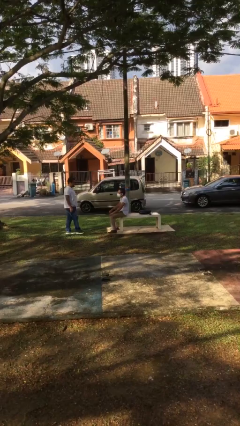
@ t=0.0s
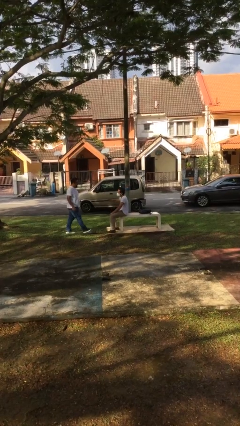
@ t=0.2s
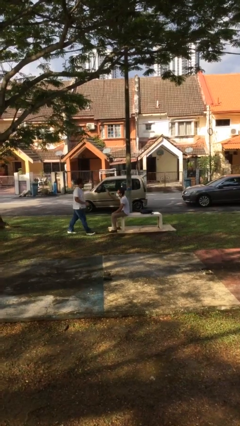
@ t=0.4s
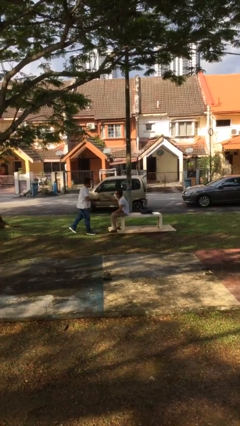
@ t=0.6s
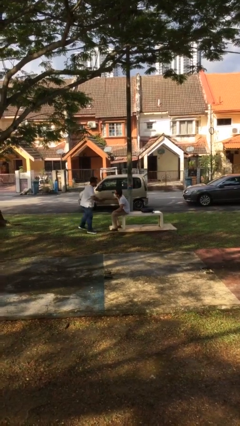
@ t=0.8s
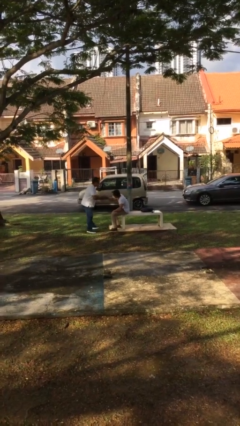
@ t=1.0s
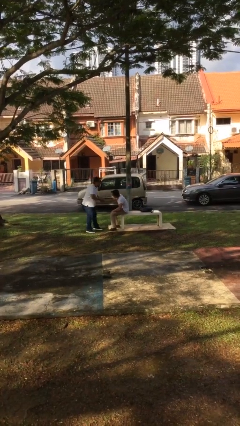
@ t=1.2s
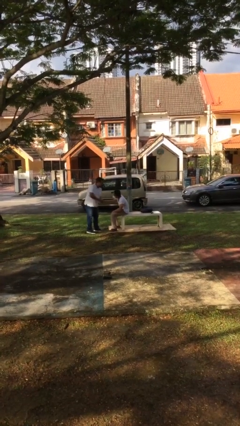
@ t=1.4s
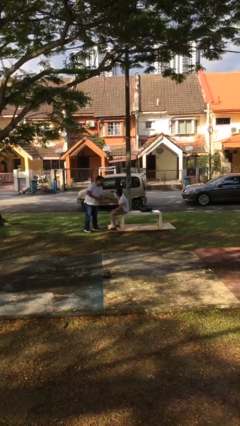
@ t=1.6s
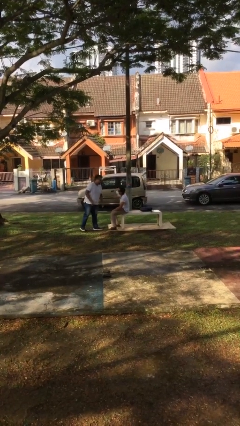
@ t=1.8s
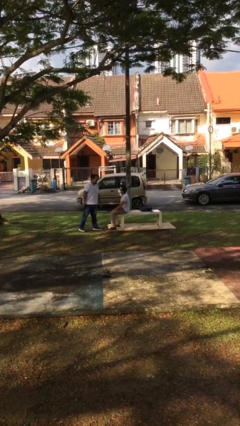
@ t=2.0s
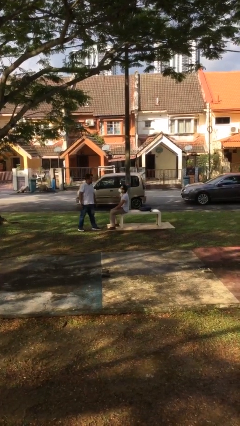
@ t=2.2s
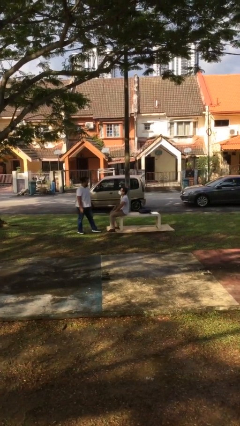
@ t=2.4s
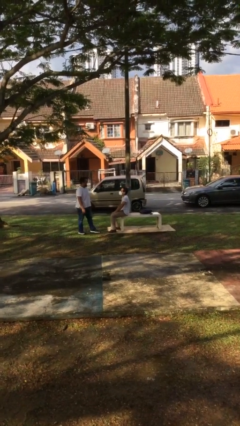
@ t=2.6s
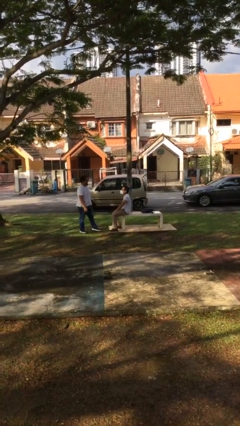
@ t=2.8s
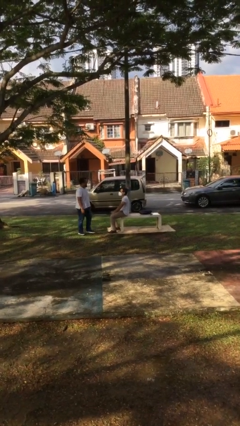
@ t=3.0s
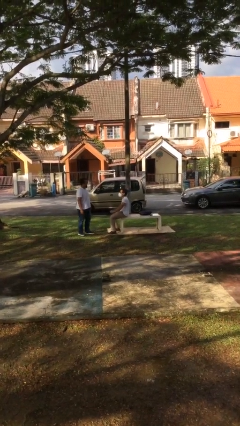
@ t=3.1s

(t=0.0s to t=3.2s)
person shakes hand

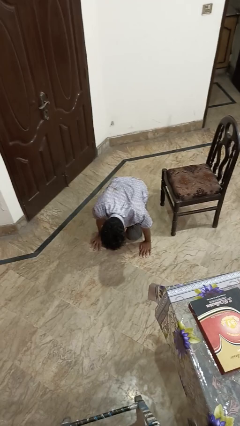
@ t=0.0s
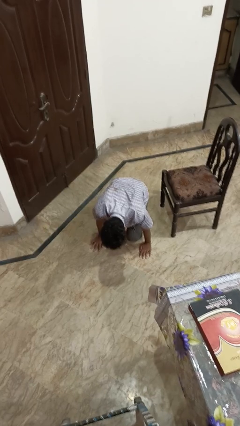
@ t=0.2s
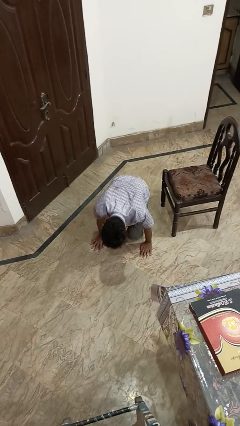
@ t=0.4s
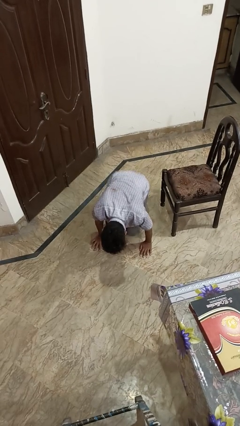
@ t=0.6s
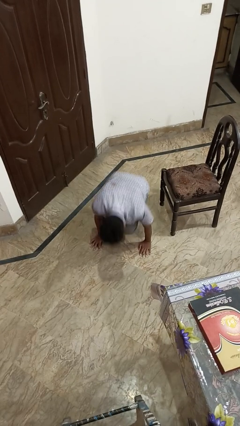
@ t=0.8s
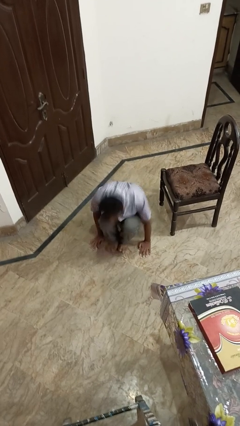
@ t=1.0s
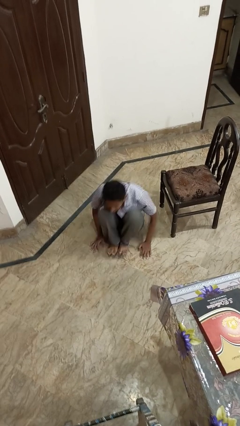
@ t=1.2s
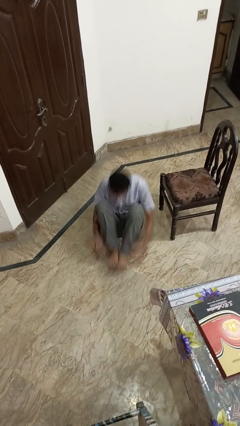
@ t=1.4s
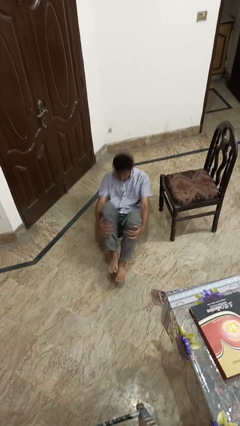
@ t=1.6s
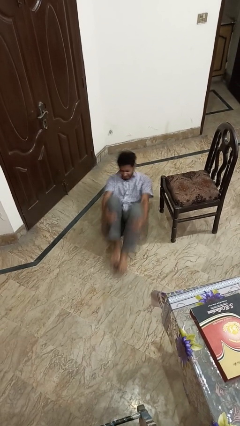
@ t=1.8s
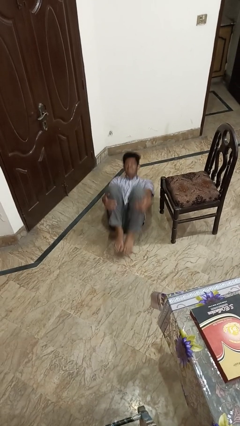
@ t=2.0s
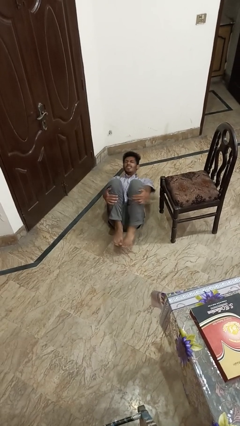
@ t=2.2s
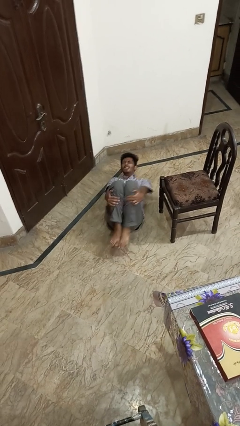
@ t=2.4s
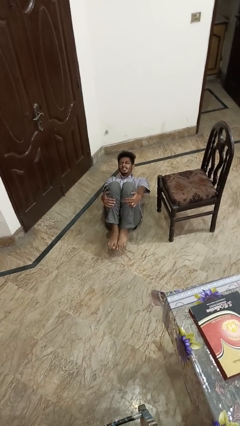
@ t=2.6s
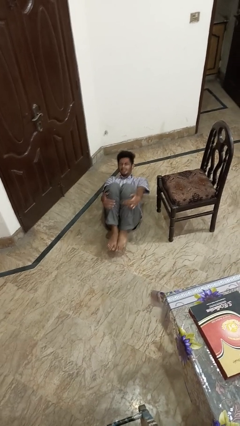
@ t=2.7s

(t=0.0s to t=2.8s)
person lies down on floor

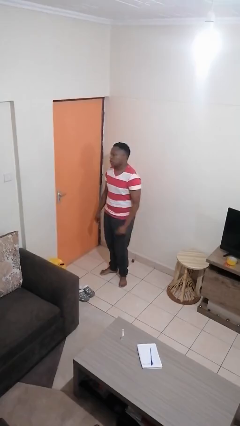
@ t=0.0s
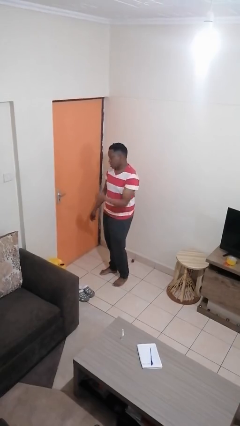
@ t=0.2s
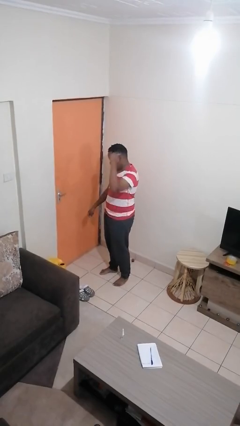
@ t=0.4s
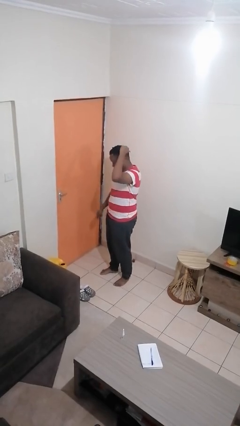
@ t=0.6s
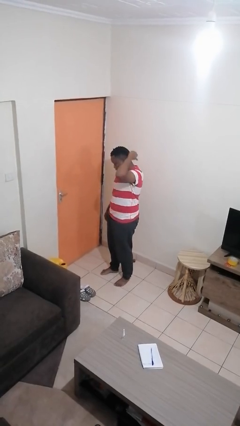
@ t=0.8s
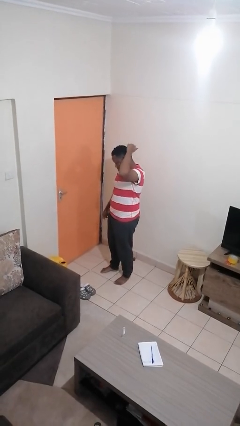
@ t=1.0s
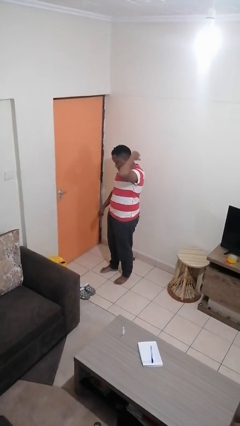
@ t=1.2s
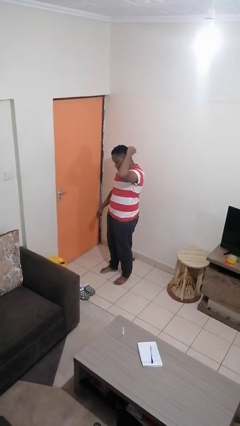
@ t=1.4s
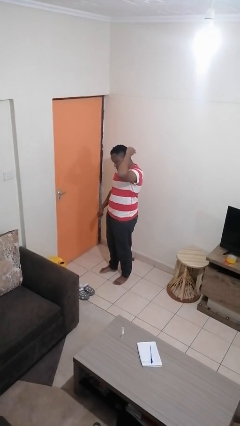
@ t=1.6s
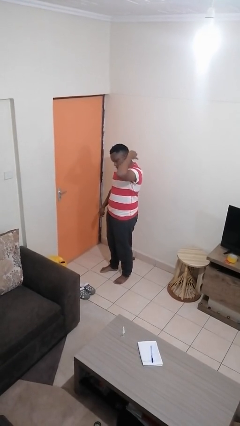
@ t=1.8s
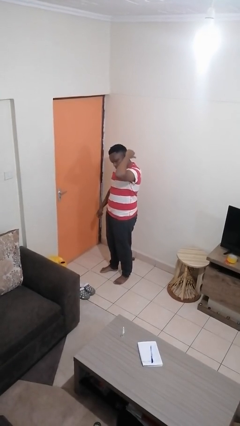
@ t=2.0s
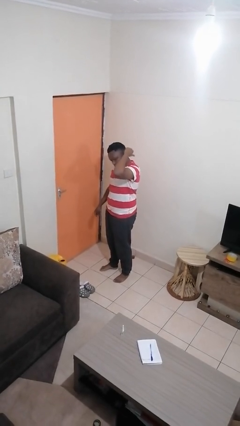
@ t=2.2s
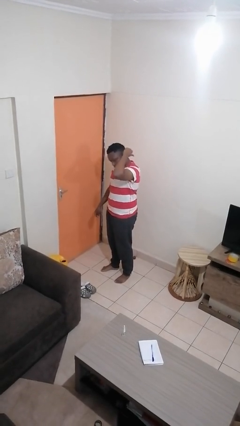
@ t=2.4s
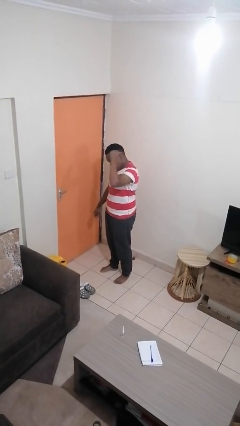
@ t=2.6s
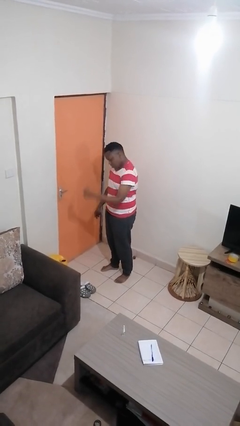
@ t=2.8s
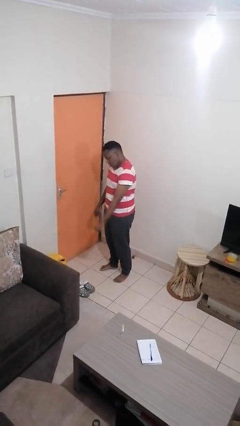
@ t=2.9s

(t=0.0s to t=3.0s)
person gestures behind me

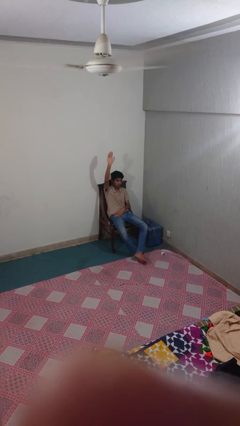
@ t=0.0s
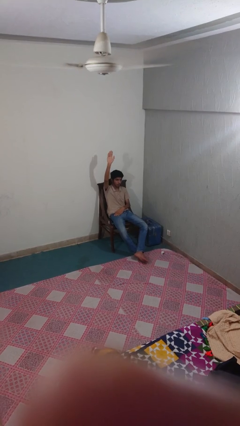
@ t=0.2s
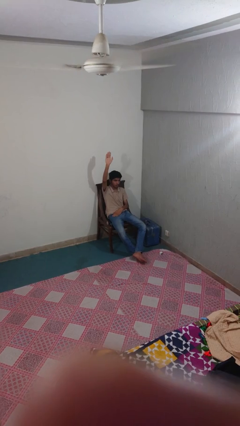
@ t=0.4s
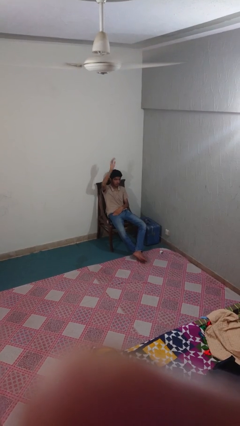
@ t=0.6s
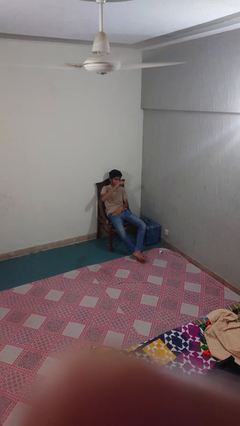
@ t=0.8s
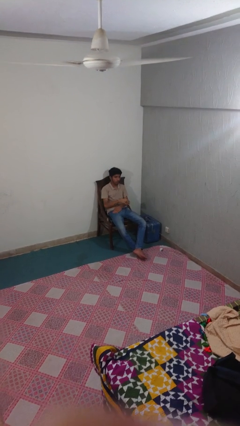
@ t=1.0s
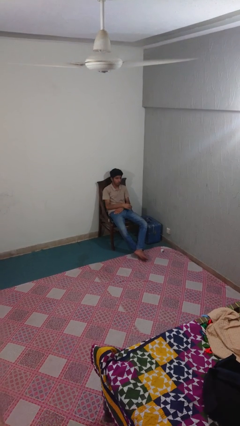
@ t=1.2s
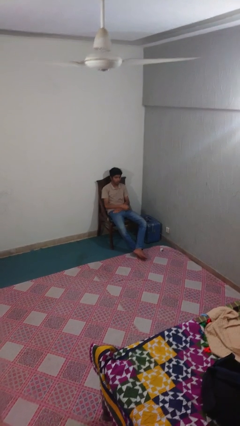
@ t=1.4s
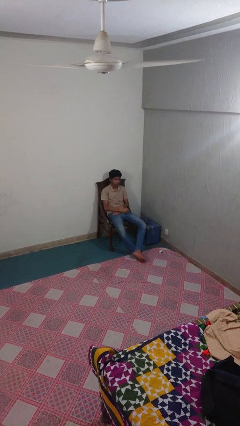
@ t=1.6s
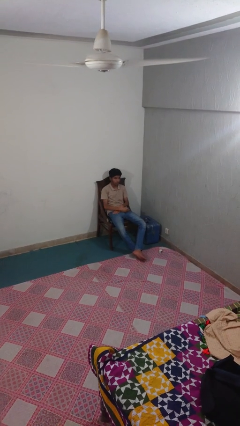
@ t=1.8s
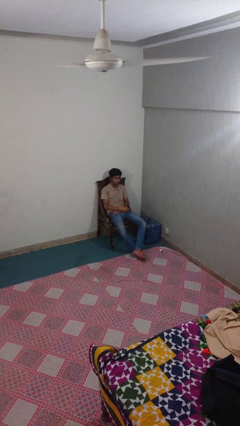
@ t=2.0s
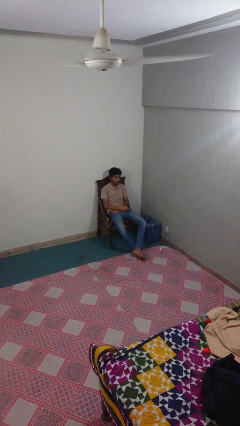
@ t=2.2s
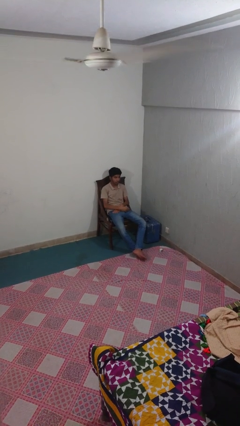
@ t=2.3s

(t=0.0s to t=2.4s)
person gestures lower hand

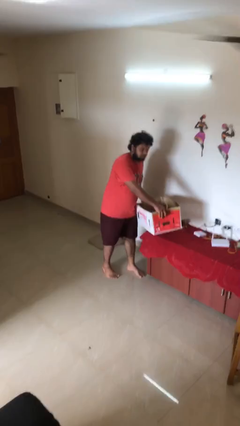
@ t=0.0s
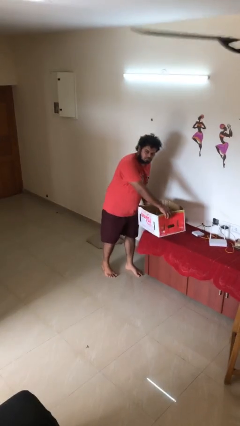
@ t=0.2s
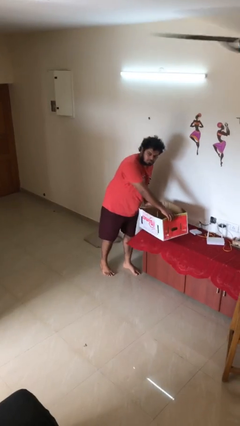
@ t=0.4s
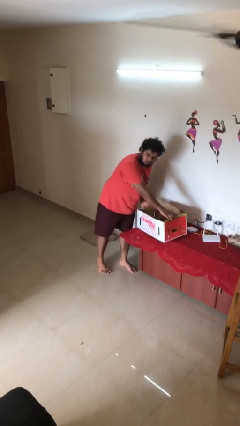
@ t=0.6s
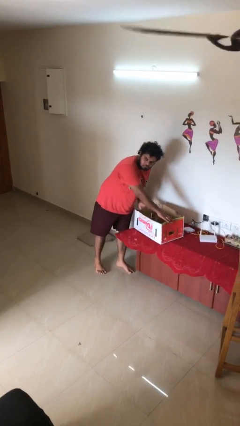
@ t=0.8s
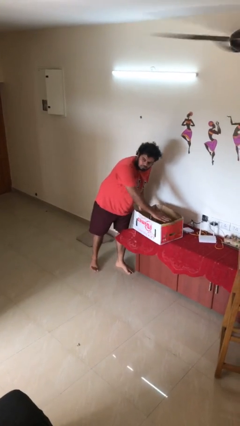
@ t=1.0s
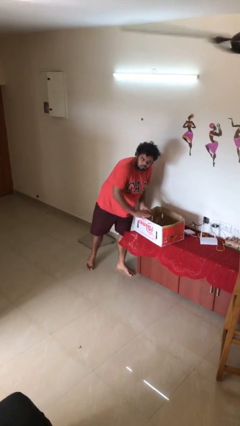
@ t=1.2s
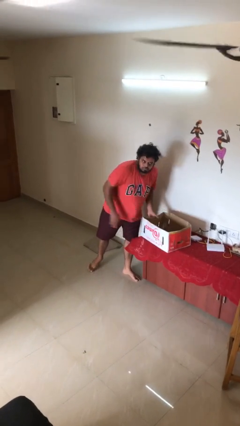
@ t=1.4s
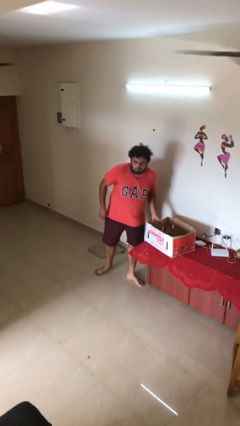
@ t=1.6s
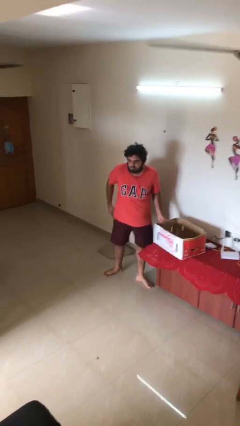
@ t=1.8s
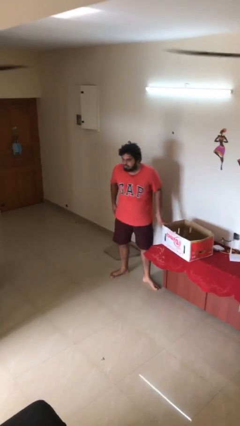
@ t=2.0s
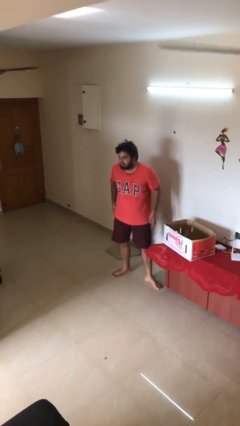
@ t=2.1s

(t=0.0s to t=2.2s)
person puts down object on table

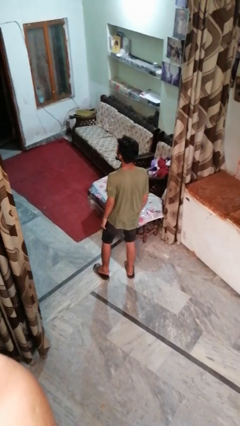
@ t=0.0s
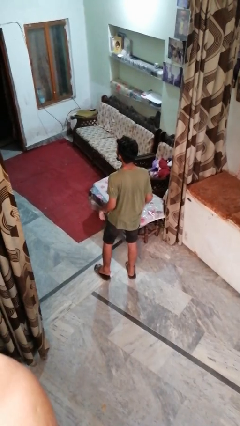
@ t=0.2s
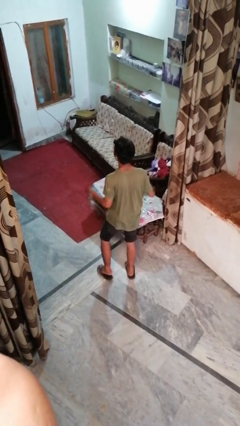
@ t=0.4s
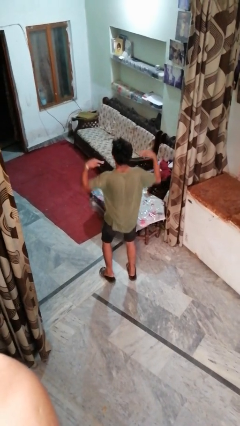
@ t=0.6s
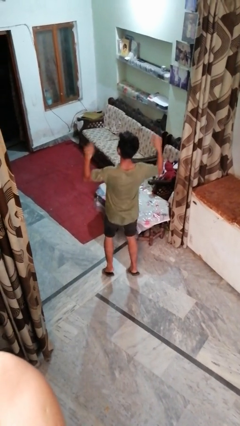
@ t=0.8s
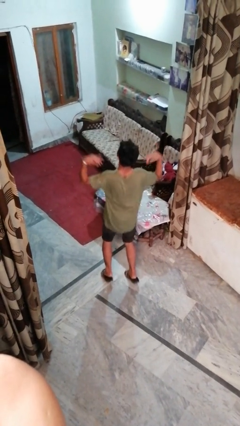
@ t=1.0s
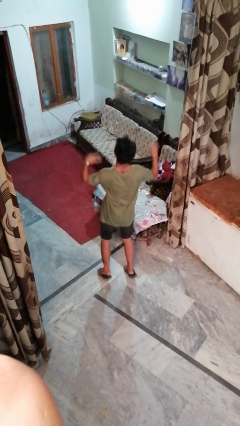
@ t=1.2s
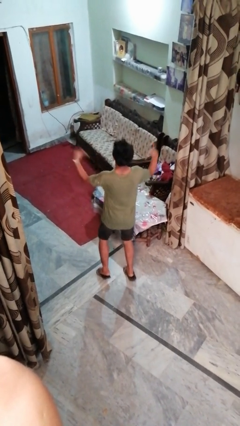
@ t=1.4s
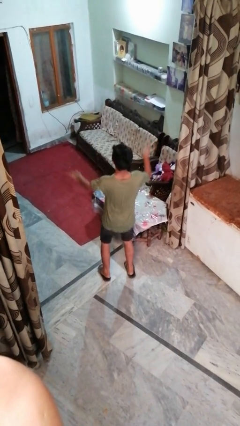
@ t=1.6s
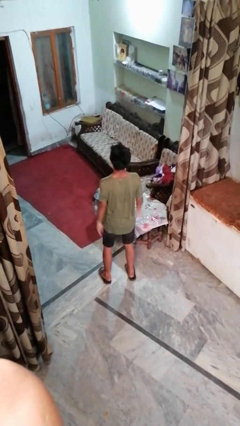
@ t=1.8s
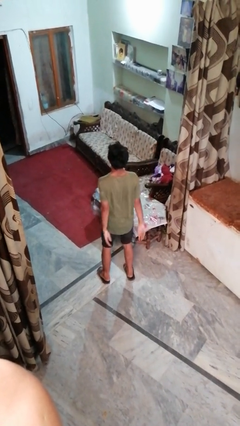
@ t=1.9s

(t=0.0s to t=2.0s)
person dances in place

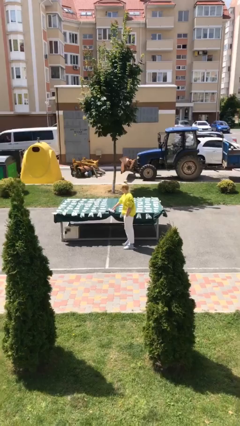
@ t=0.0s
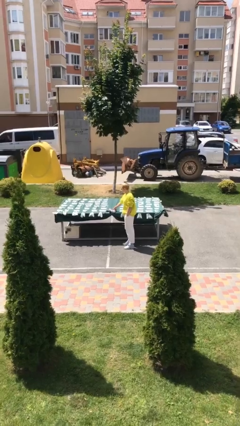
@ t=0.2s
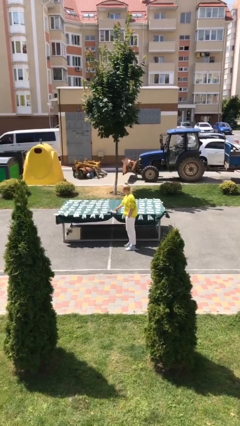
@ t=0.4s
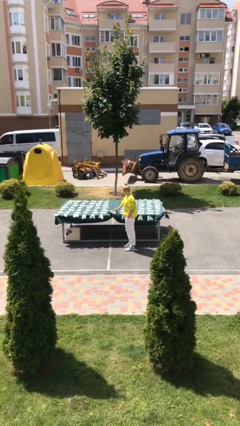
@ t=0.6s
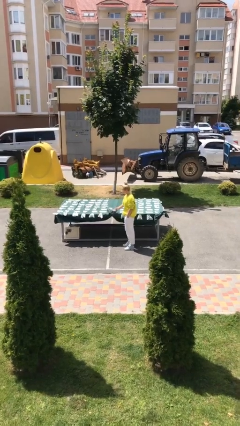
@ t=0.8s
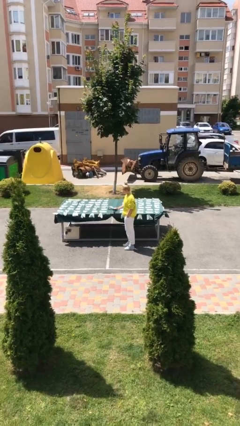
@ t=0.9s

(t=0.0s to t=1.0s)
person picks up object from table

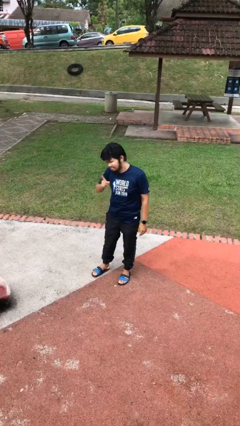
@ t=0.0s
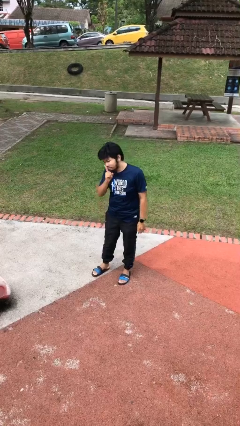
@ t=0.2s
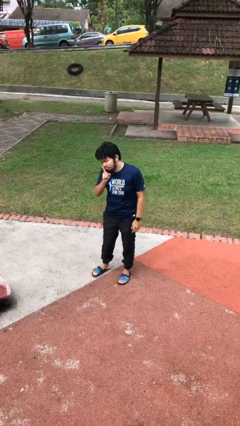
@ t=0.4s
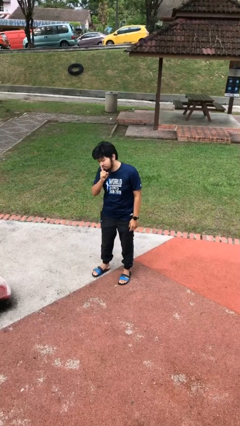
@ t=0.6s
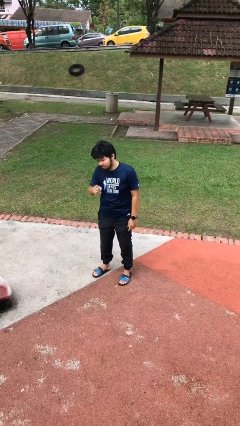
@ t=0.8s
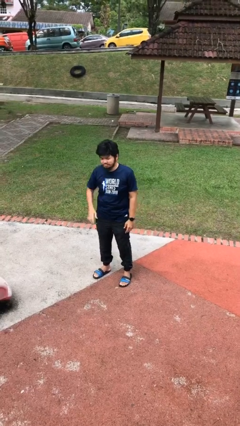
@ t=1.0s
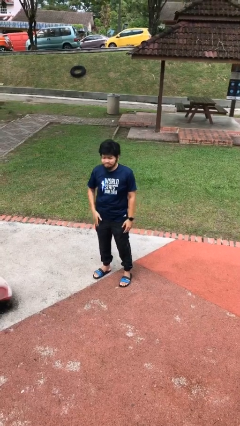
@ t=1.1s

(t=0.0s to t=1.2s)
person gestures be quiet
